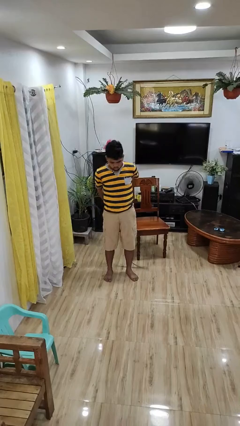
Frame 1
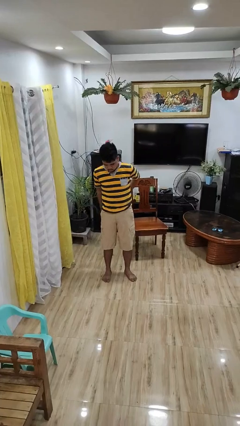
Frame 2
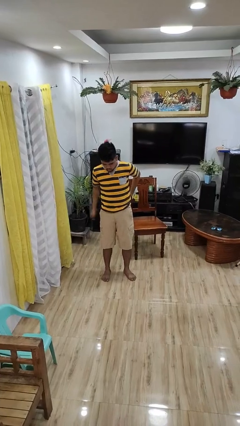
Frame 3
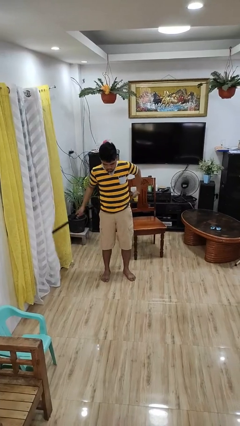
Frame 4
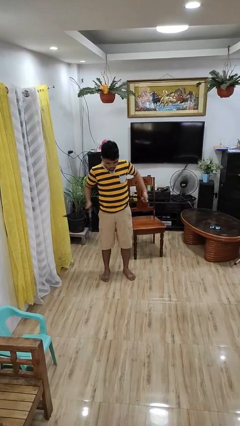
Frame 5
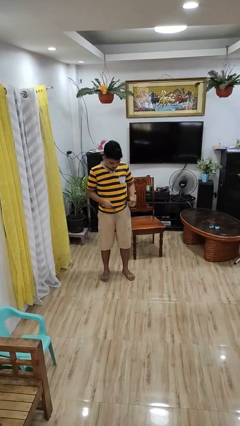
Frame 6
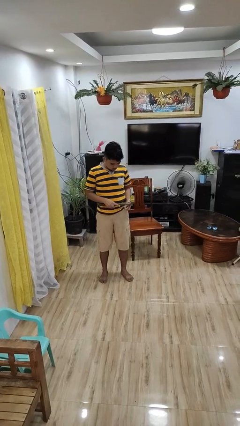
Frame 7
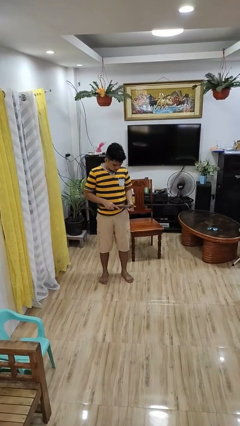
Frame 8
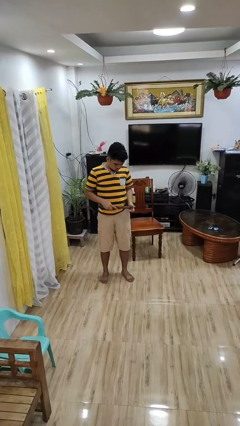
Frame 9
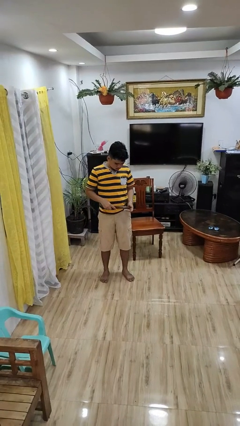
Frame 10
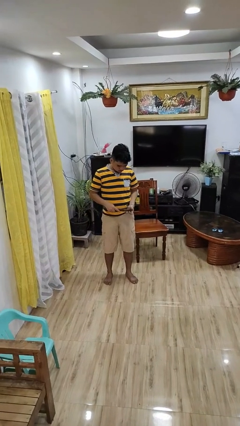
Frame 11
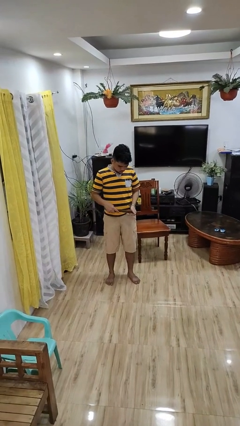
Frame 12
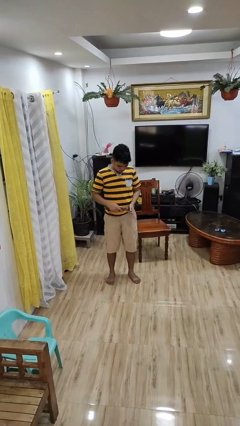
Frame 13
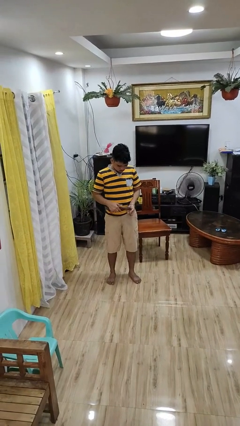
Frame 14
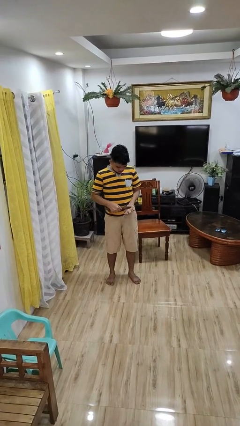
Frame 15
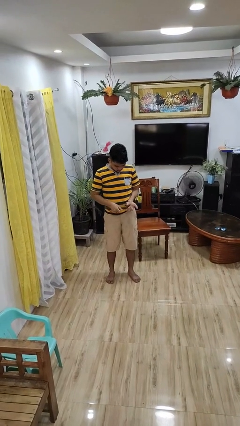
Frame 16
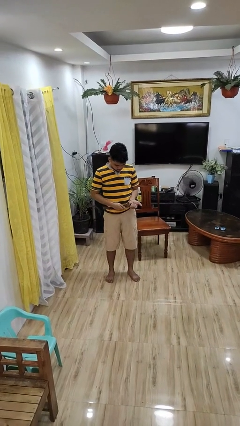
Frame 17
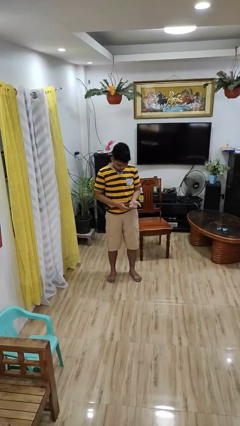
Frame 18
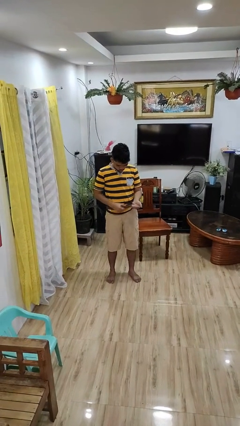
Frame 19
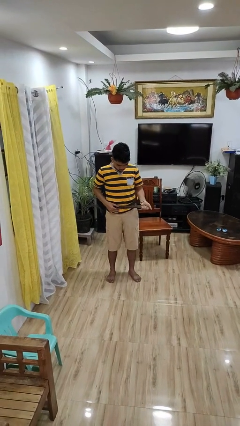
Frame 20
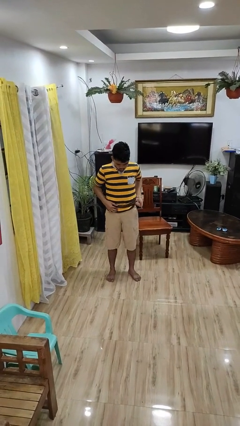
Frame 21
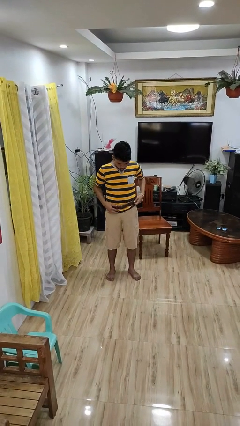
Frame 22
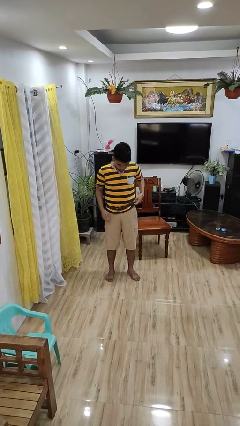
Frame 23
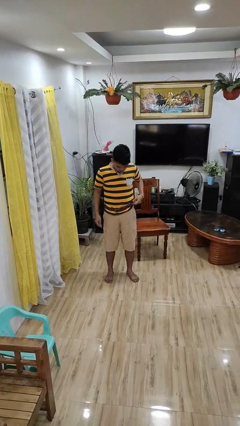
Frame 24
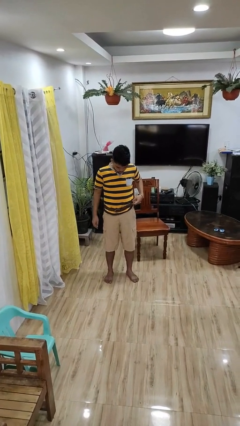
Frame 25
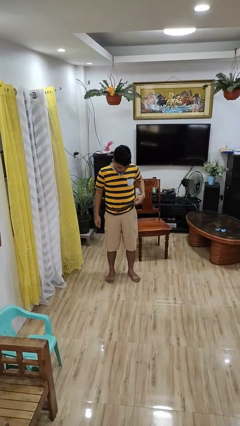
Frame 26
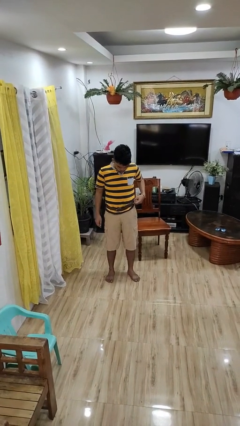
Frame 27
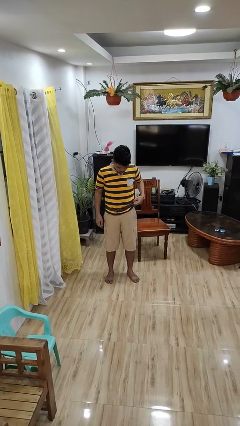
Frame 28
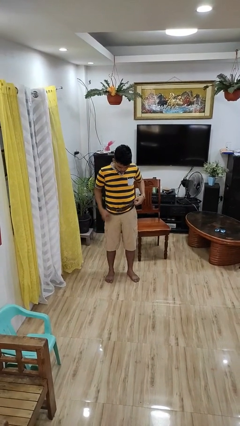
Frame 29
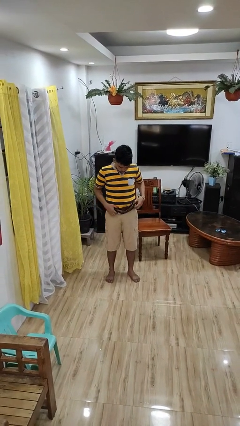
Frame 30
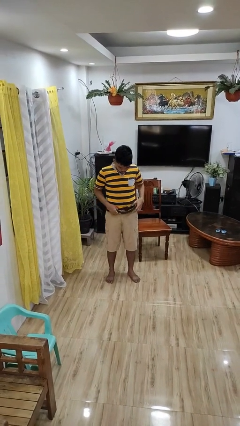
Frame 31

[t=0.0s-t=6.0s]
person puts on belt

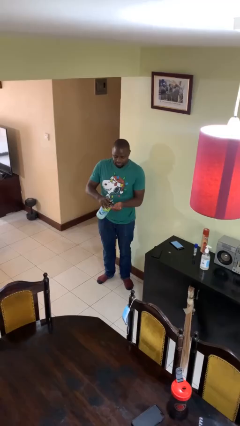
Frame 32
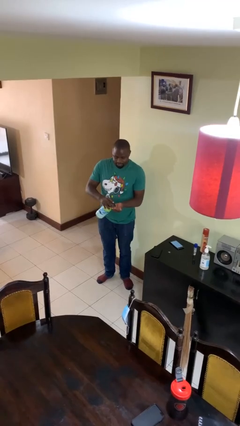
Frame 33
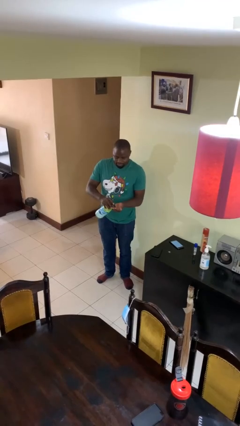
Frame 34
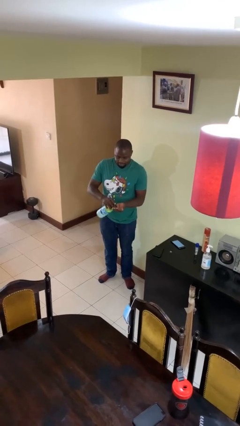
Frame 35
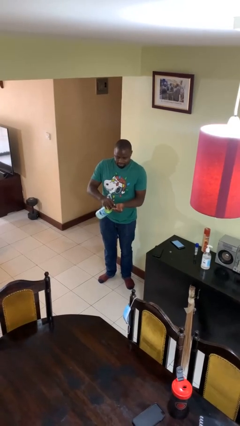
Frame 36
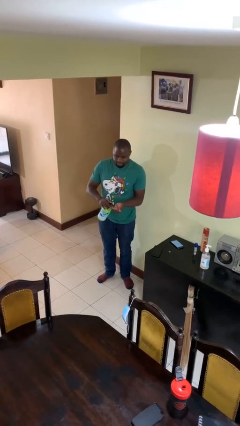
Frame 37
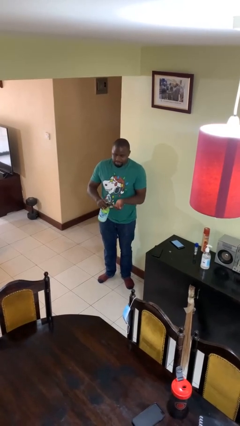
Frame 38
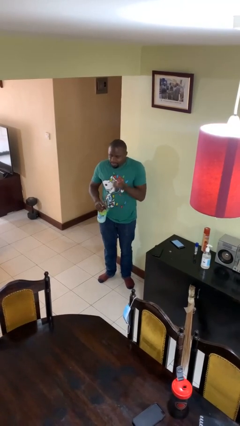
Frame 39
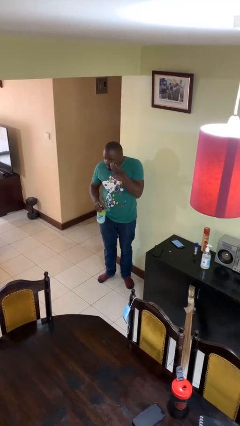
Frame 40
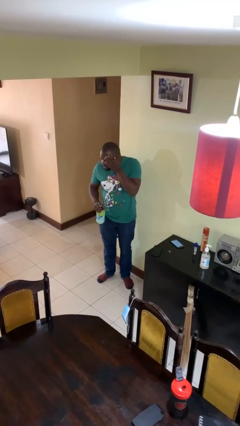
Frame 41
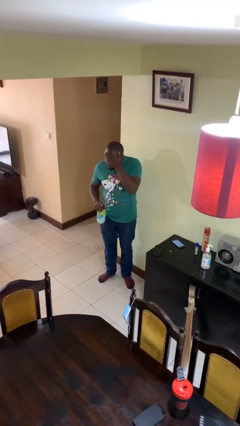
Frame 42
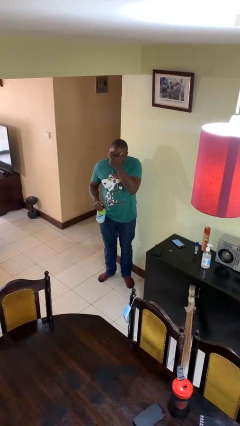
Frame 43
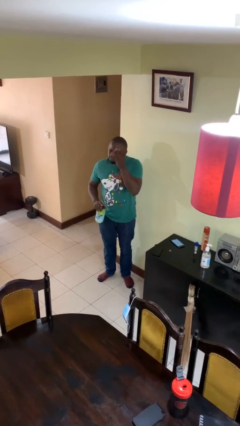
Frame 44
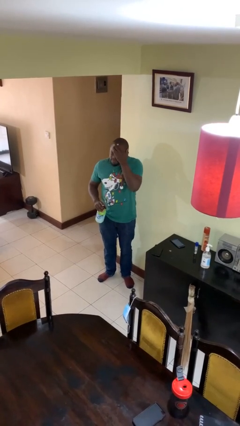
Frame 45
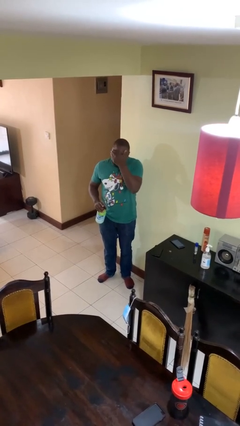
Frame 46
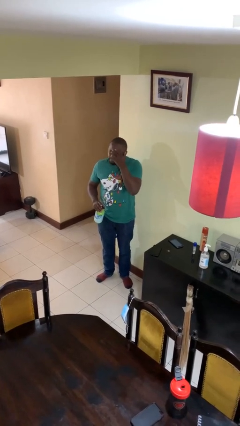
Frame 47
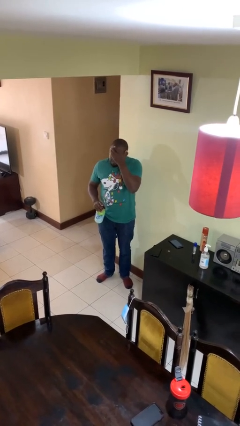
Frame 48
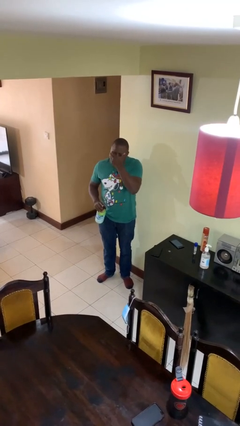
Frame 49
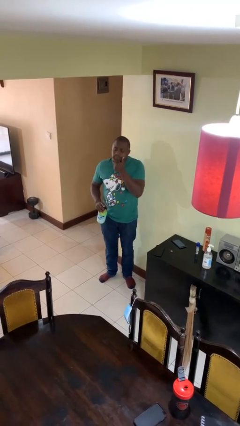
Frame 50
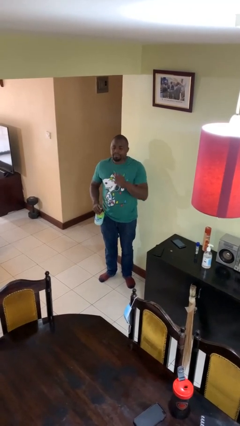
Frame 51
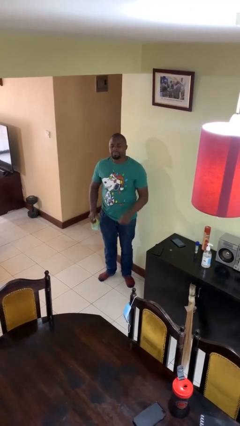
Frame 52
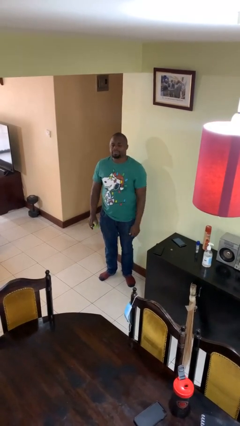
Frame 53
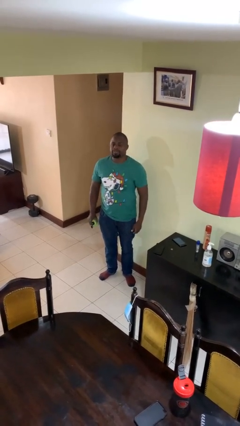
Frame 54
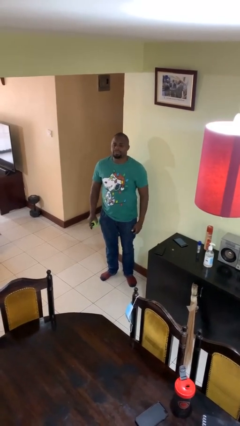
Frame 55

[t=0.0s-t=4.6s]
person applies facial moisturizer

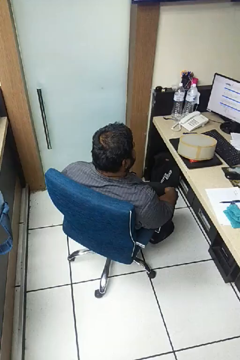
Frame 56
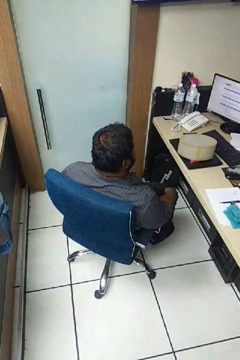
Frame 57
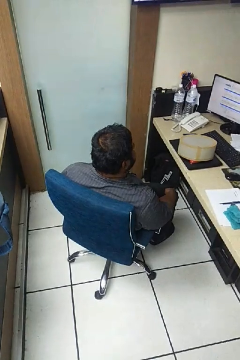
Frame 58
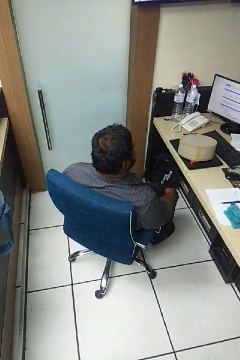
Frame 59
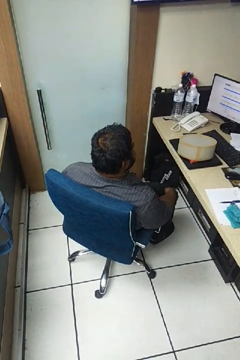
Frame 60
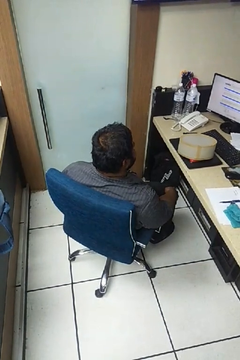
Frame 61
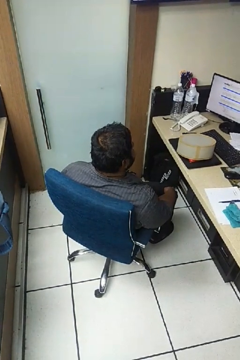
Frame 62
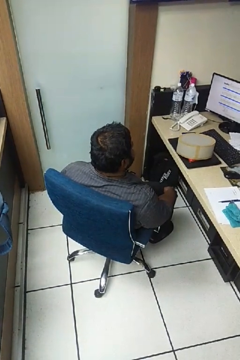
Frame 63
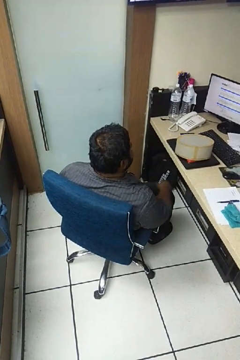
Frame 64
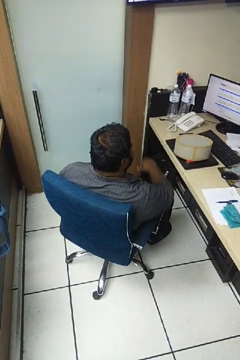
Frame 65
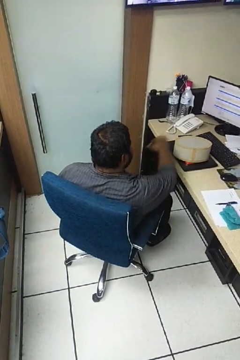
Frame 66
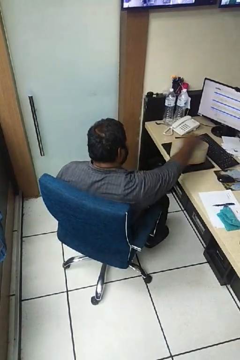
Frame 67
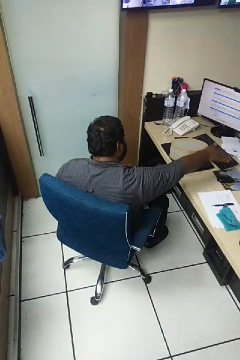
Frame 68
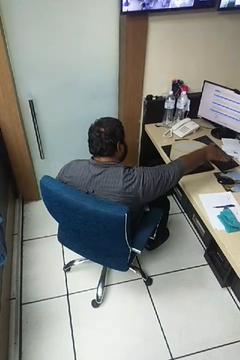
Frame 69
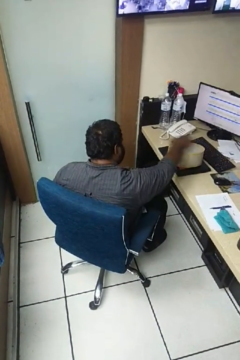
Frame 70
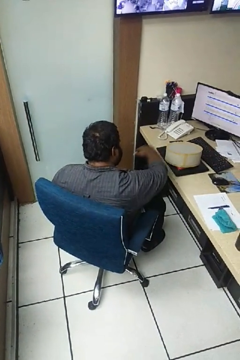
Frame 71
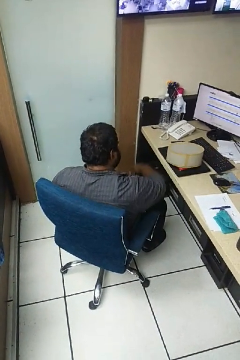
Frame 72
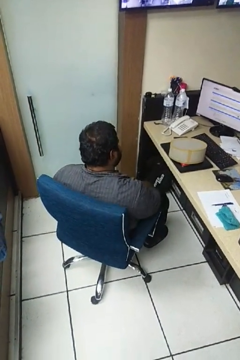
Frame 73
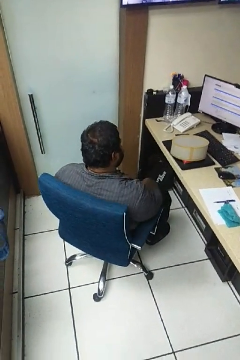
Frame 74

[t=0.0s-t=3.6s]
person waves hand over object

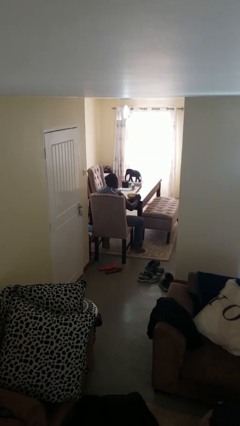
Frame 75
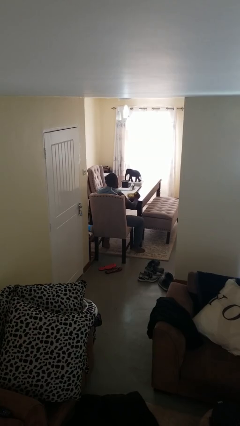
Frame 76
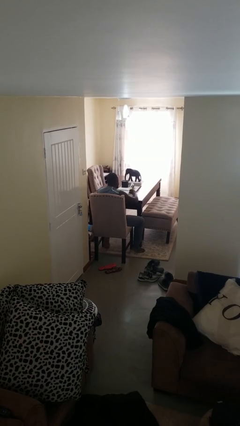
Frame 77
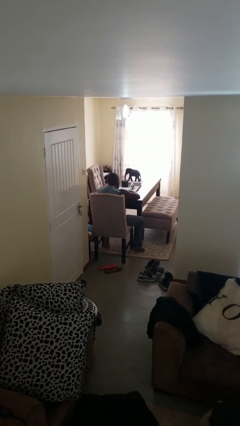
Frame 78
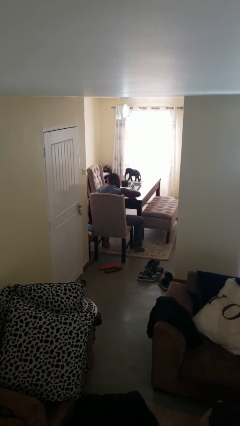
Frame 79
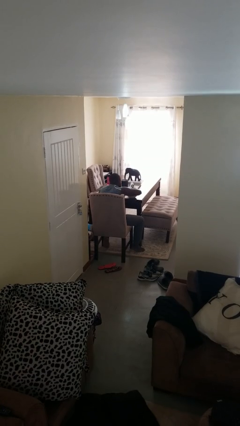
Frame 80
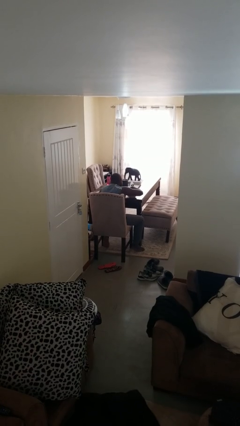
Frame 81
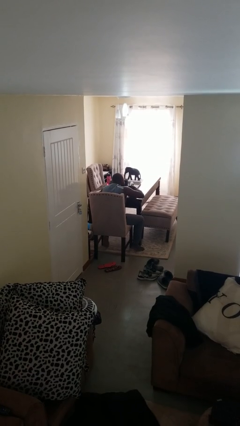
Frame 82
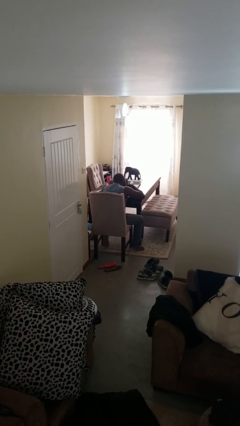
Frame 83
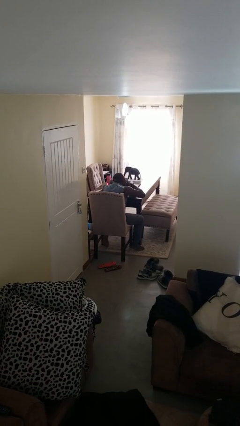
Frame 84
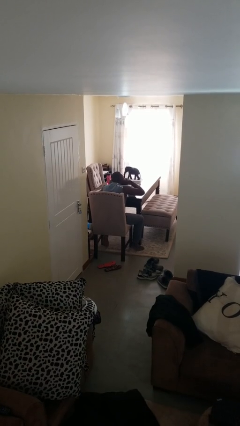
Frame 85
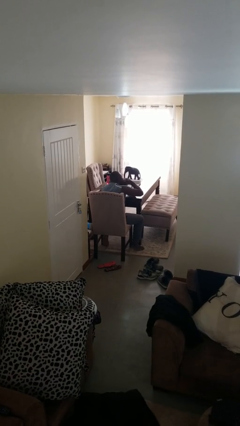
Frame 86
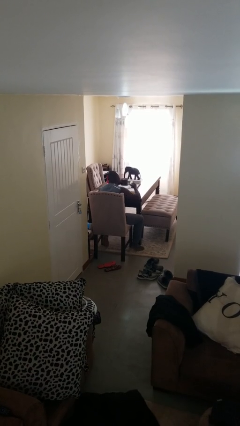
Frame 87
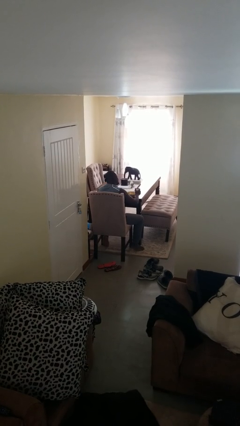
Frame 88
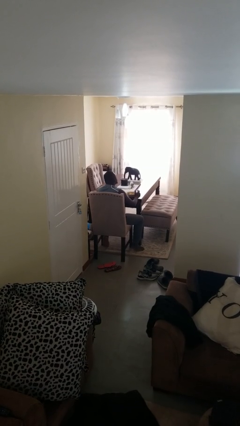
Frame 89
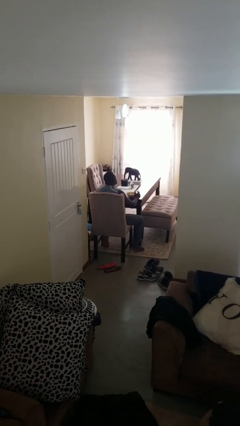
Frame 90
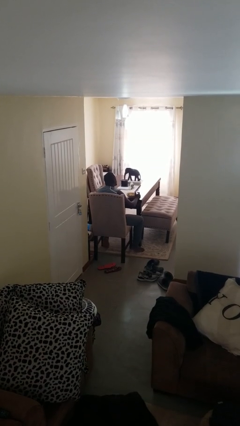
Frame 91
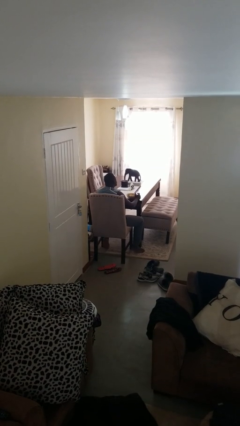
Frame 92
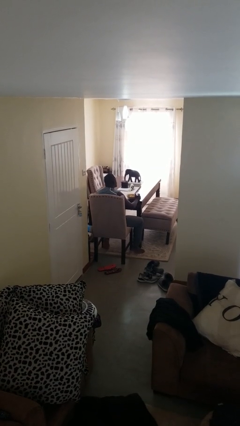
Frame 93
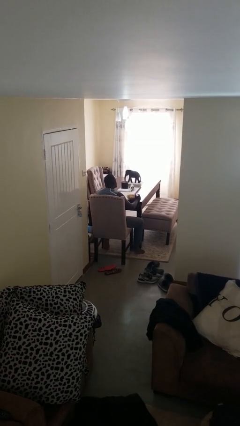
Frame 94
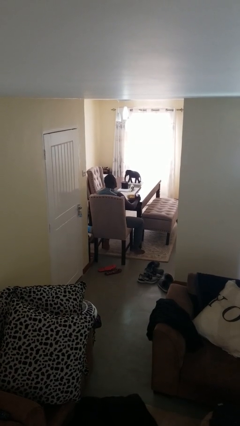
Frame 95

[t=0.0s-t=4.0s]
person eats with hands

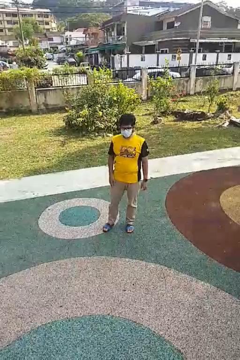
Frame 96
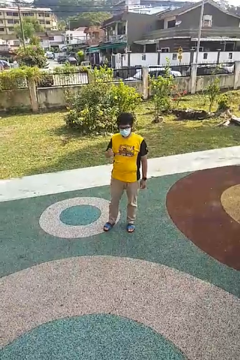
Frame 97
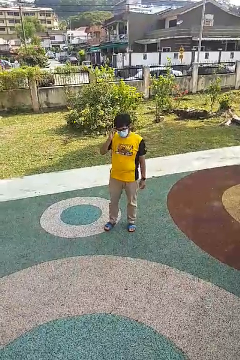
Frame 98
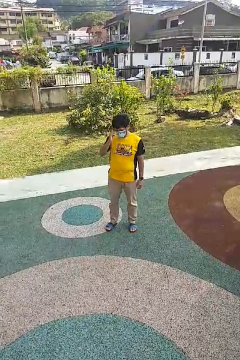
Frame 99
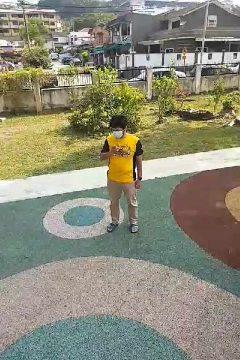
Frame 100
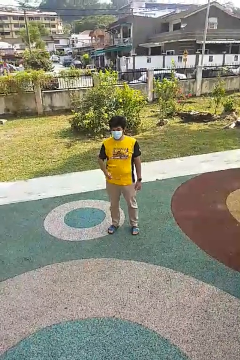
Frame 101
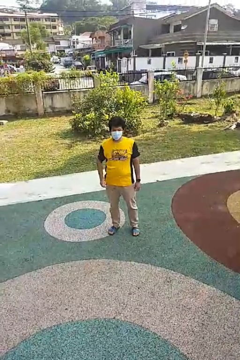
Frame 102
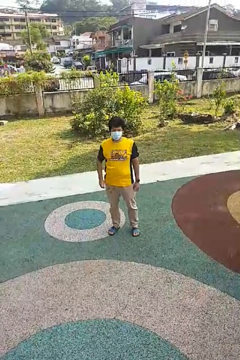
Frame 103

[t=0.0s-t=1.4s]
person takes off glasses
